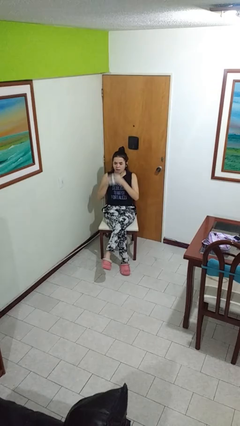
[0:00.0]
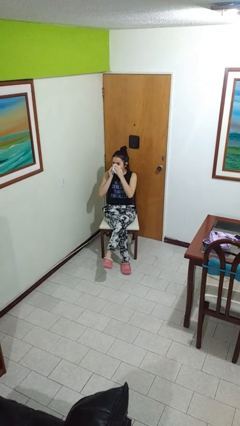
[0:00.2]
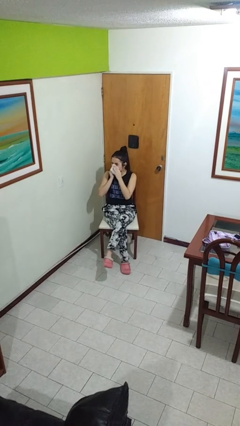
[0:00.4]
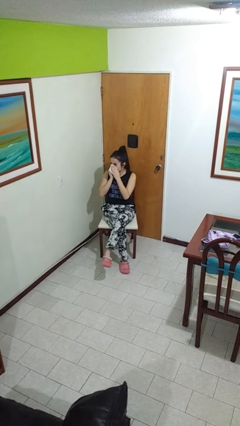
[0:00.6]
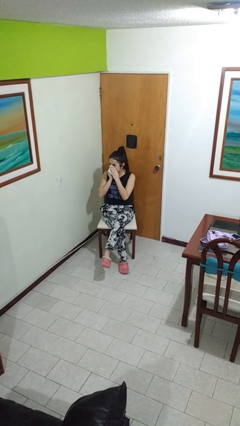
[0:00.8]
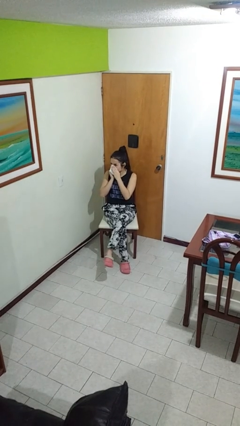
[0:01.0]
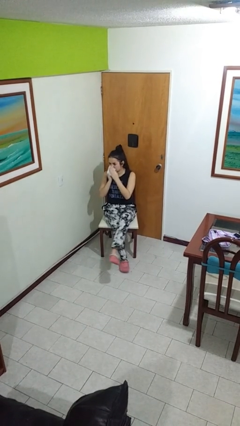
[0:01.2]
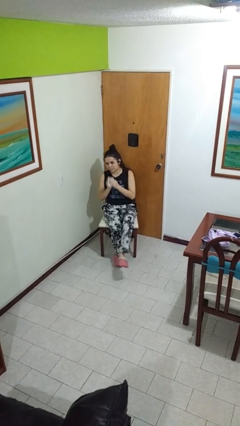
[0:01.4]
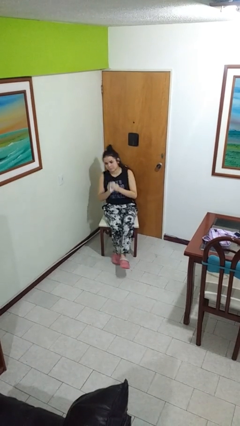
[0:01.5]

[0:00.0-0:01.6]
person blows nose

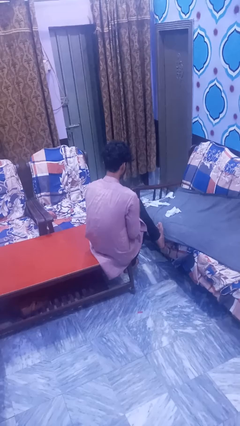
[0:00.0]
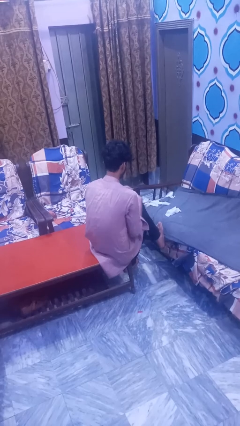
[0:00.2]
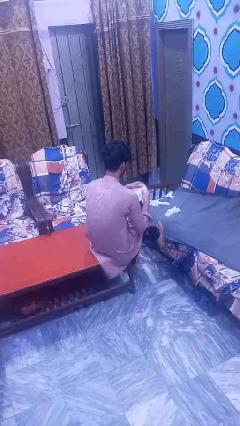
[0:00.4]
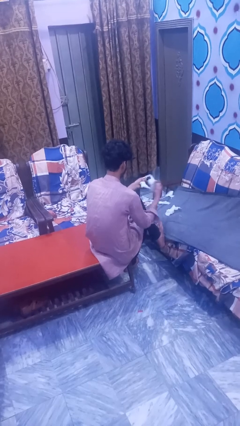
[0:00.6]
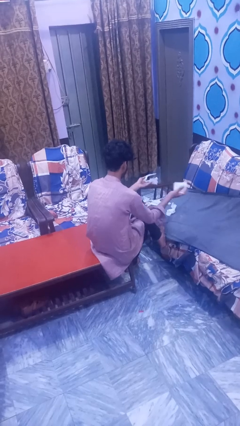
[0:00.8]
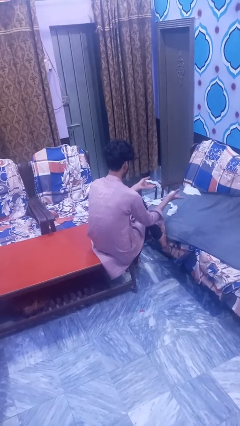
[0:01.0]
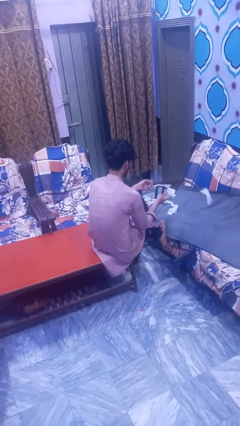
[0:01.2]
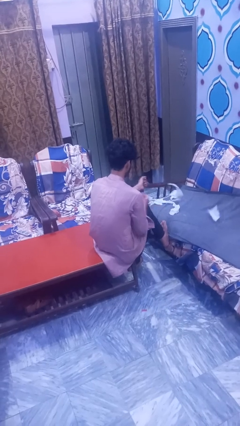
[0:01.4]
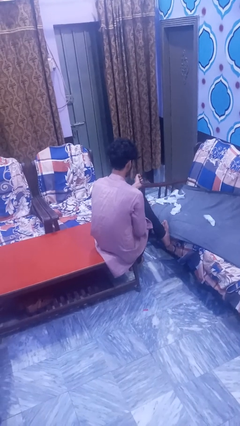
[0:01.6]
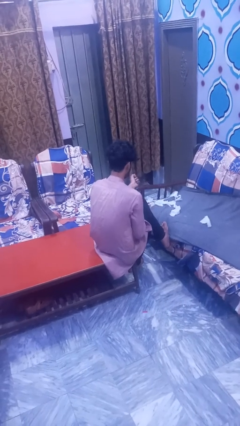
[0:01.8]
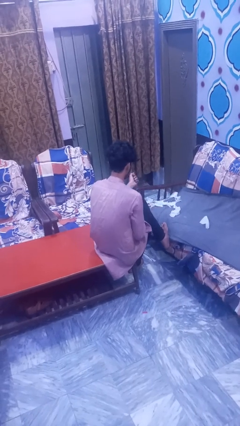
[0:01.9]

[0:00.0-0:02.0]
person tears paper

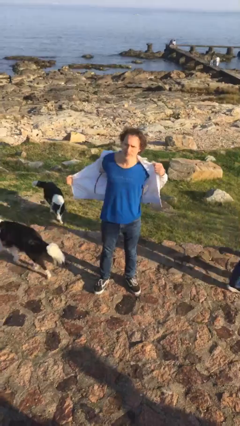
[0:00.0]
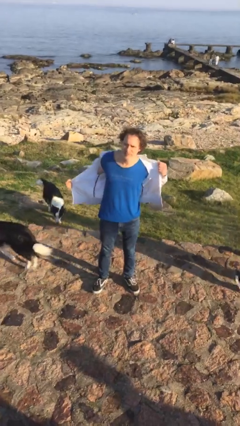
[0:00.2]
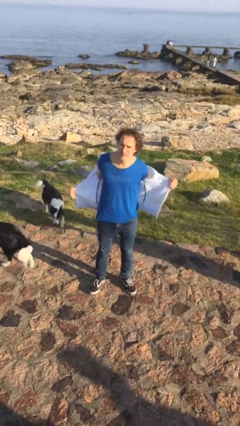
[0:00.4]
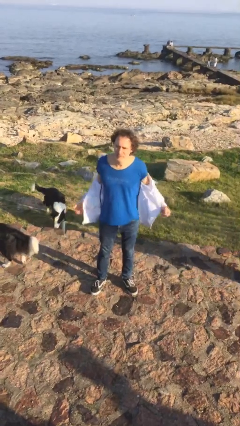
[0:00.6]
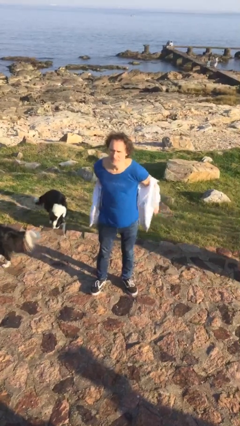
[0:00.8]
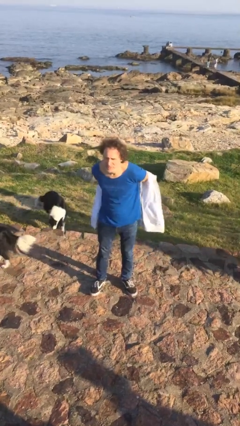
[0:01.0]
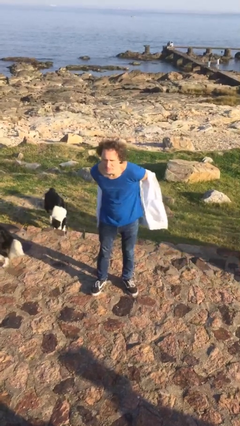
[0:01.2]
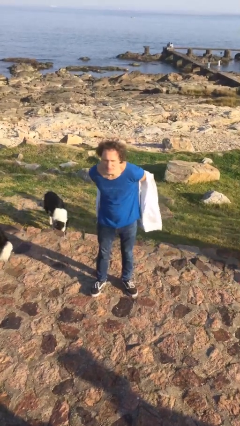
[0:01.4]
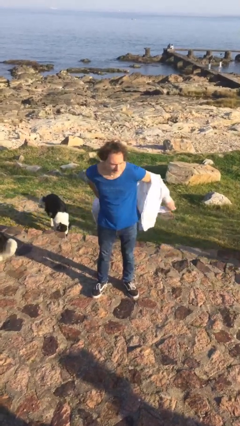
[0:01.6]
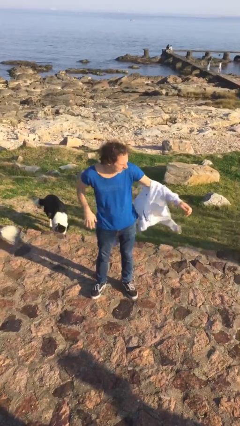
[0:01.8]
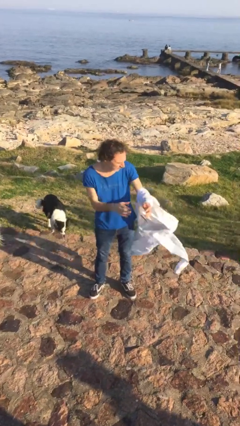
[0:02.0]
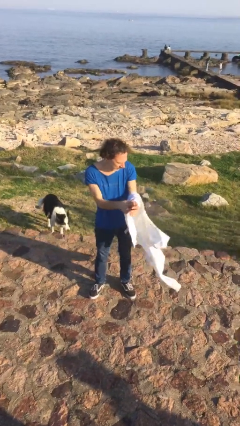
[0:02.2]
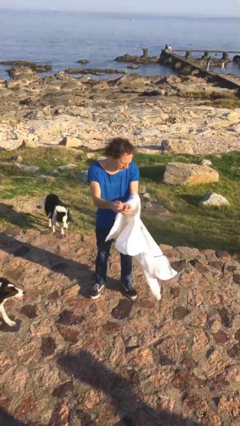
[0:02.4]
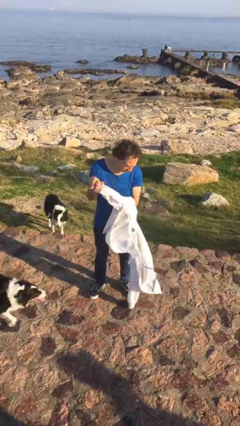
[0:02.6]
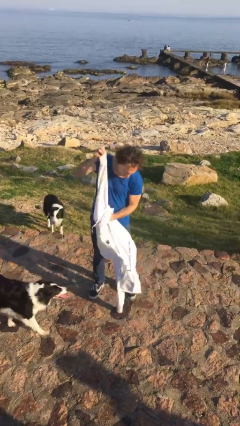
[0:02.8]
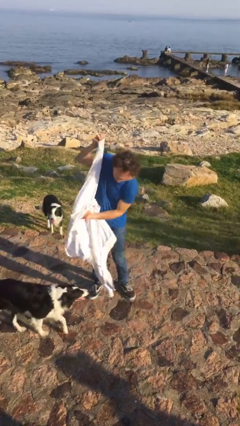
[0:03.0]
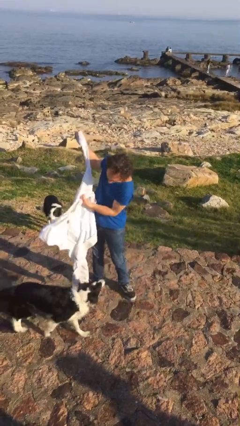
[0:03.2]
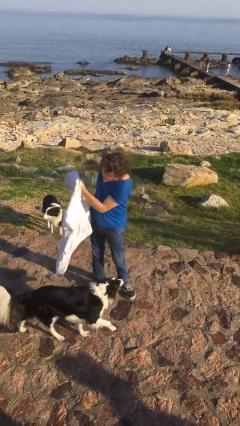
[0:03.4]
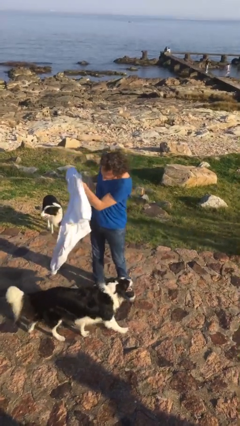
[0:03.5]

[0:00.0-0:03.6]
person takes off jacket

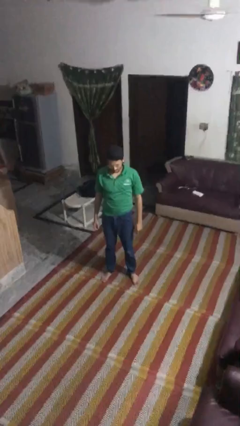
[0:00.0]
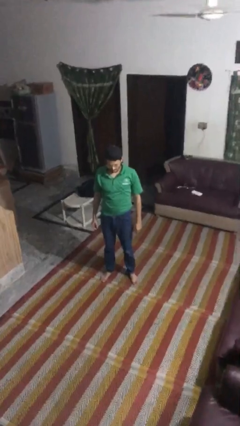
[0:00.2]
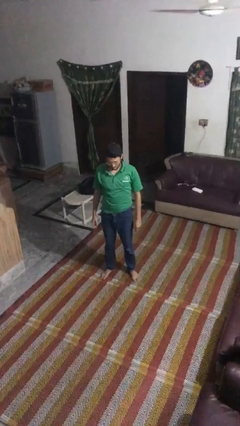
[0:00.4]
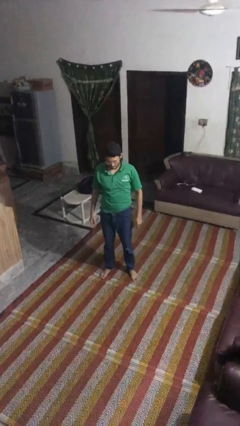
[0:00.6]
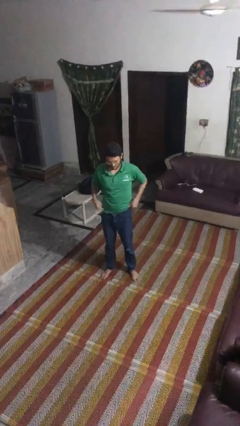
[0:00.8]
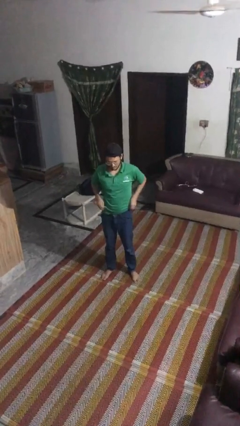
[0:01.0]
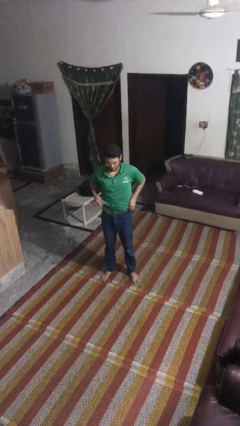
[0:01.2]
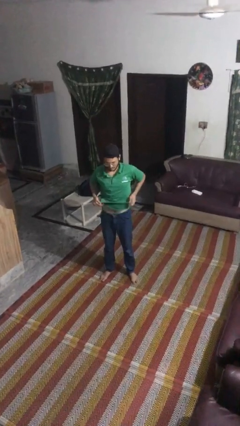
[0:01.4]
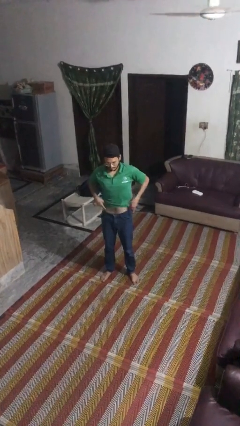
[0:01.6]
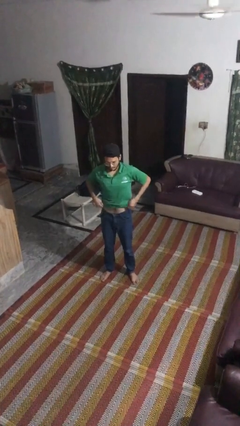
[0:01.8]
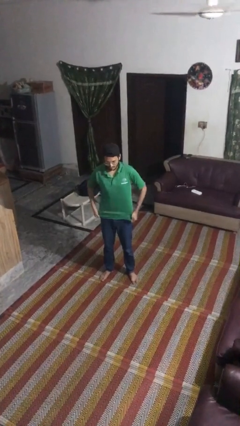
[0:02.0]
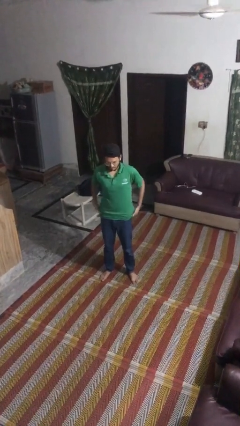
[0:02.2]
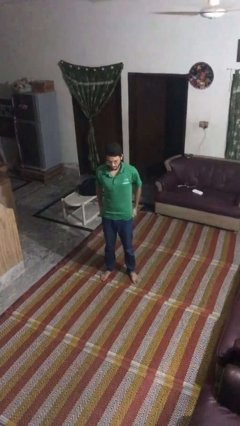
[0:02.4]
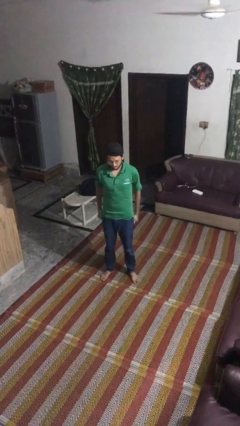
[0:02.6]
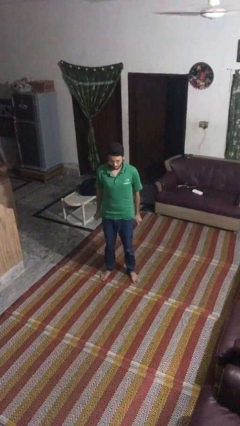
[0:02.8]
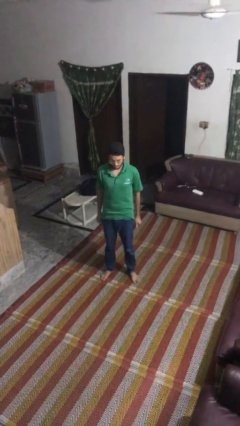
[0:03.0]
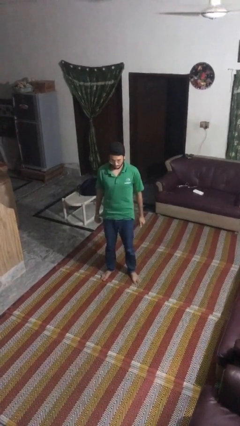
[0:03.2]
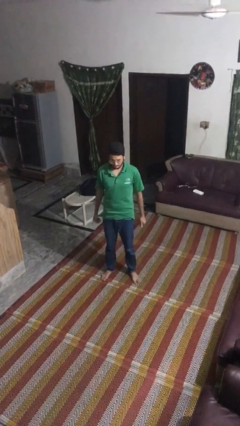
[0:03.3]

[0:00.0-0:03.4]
person untucks shirt

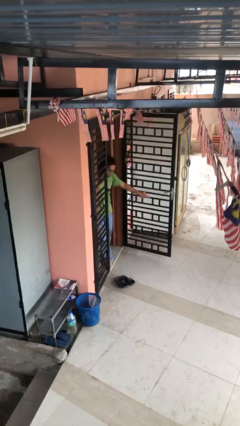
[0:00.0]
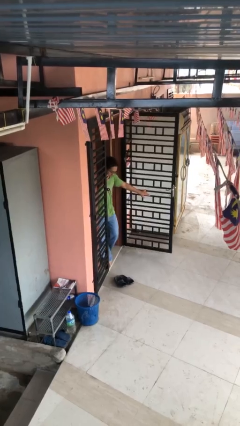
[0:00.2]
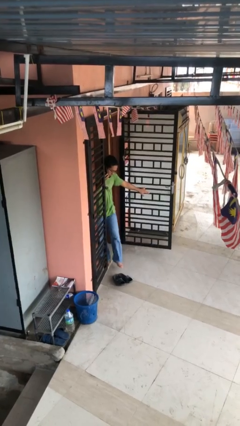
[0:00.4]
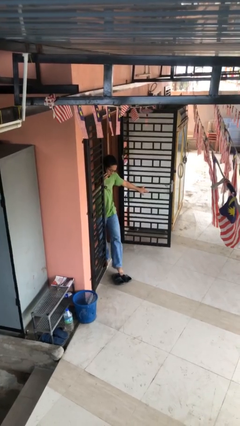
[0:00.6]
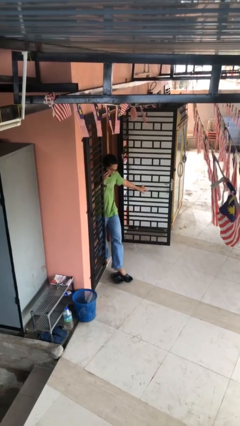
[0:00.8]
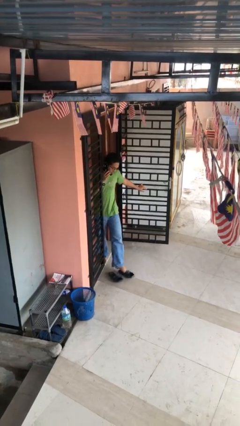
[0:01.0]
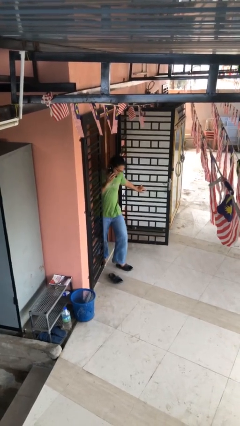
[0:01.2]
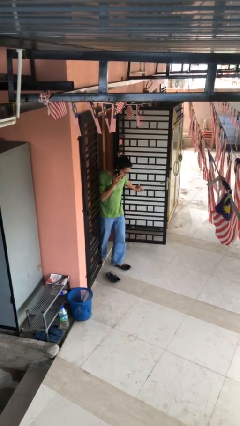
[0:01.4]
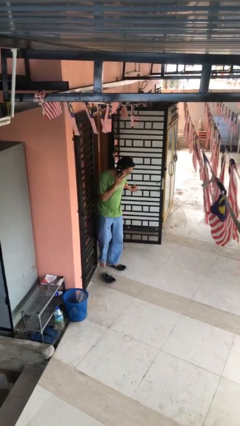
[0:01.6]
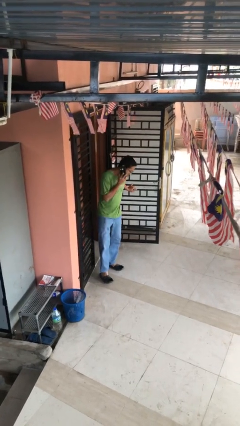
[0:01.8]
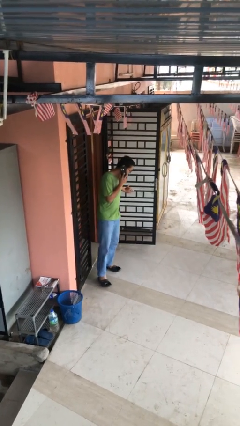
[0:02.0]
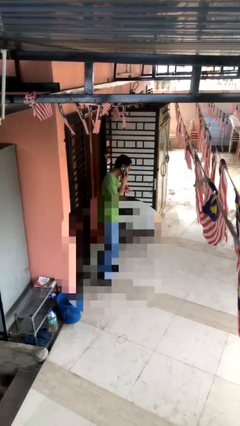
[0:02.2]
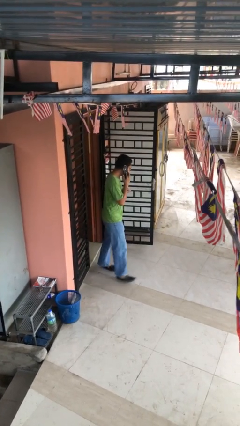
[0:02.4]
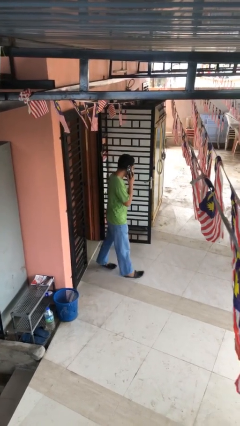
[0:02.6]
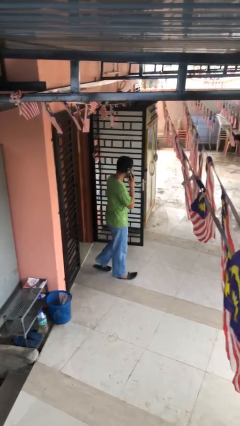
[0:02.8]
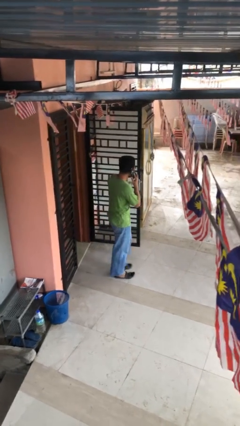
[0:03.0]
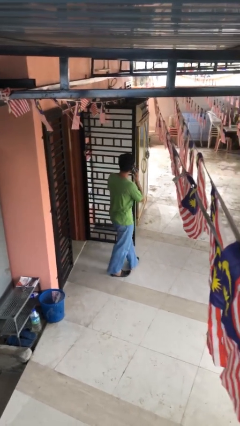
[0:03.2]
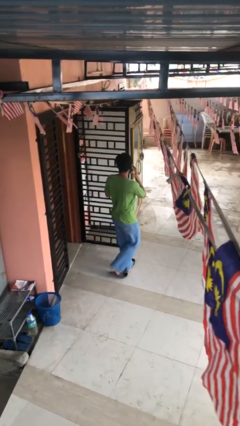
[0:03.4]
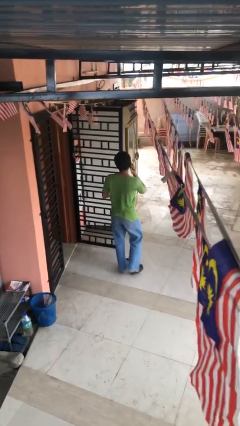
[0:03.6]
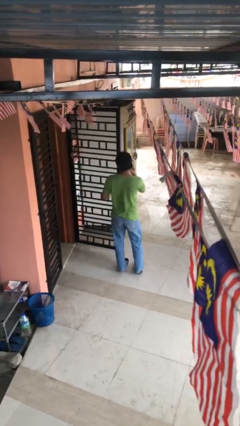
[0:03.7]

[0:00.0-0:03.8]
person enters scene through structure

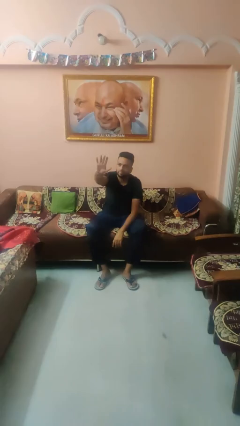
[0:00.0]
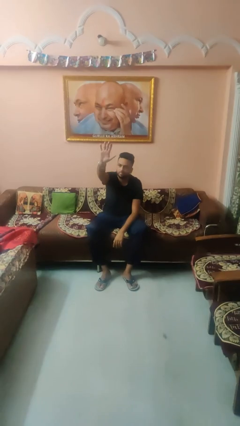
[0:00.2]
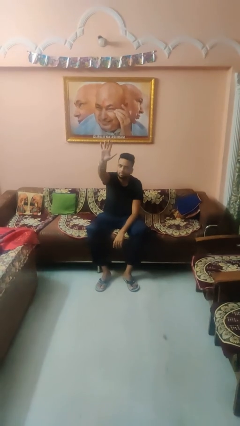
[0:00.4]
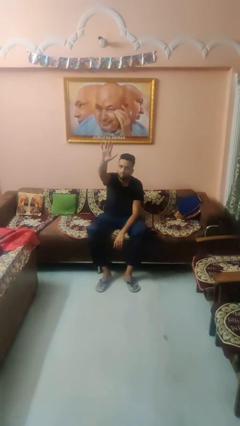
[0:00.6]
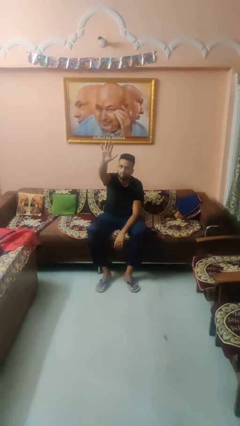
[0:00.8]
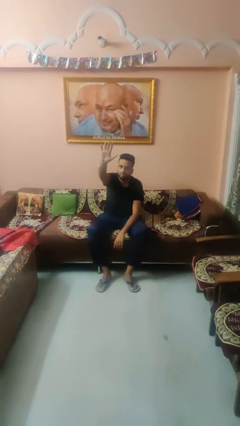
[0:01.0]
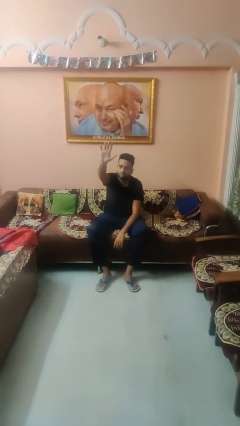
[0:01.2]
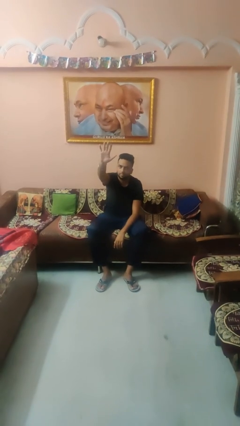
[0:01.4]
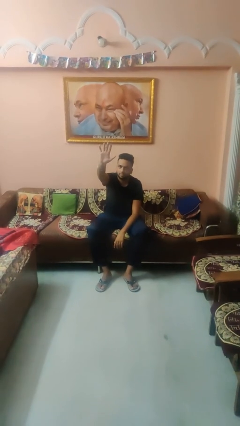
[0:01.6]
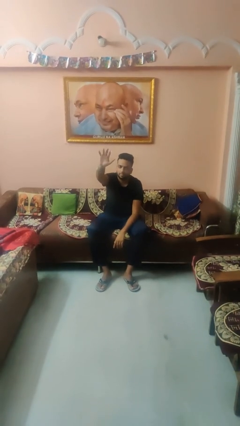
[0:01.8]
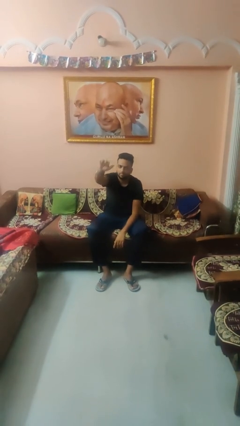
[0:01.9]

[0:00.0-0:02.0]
person gestures number five

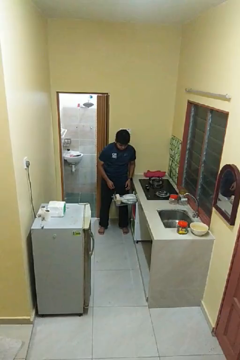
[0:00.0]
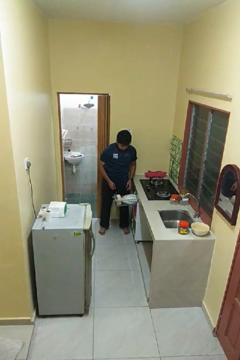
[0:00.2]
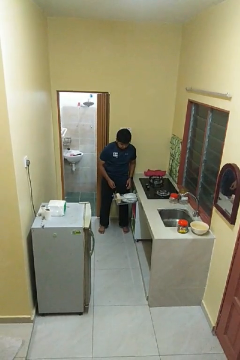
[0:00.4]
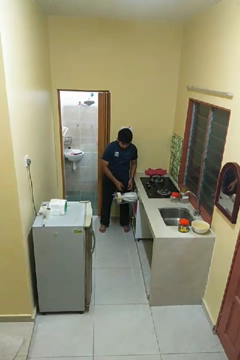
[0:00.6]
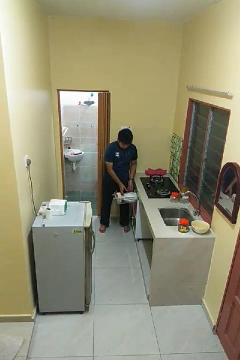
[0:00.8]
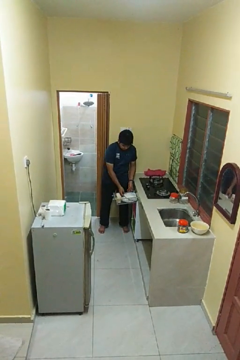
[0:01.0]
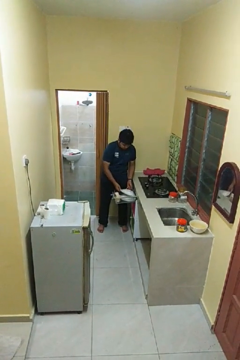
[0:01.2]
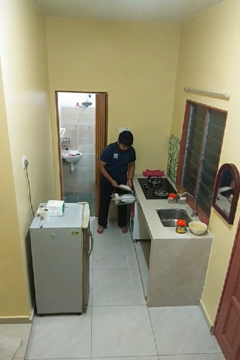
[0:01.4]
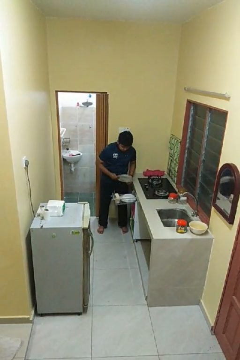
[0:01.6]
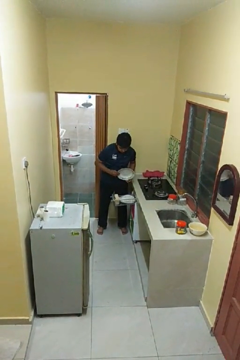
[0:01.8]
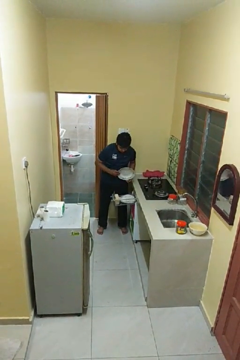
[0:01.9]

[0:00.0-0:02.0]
person takes object from kitchen drawer
